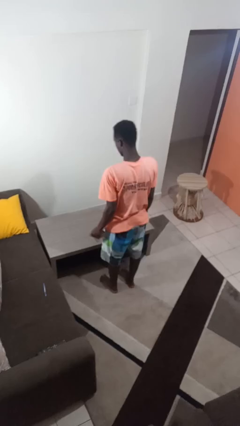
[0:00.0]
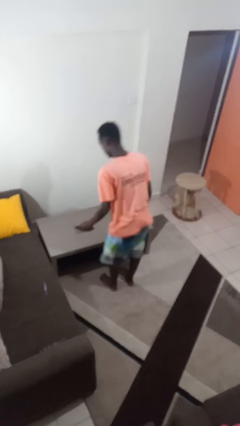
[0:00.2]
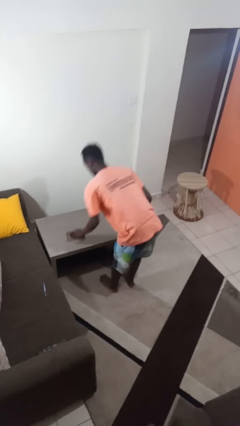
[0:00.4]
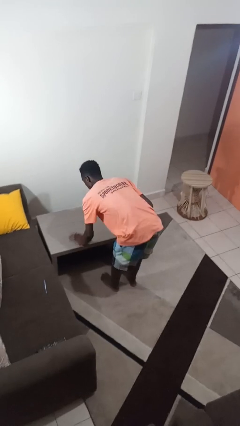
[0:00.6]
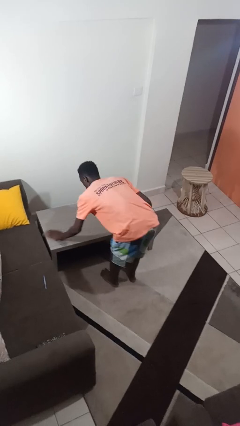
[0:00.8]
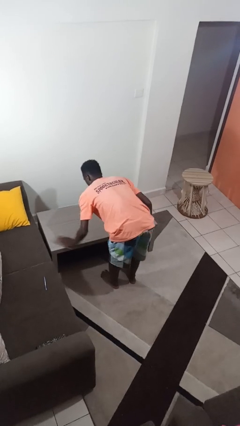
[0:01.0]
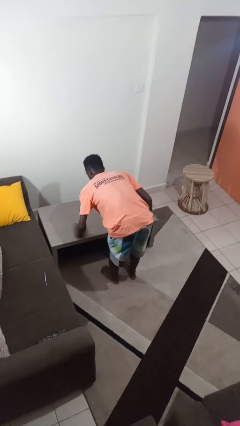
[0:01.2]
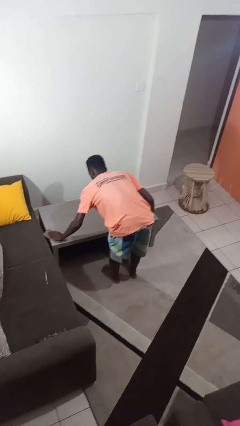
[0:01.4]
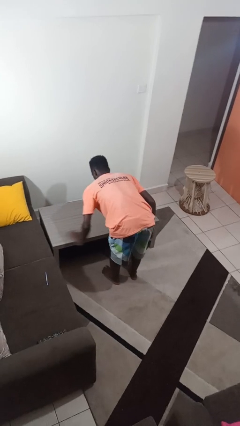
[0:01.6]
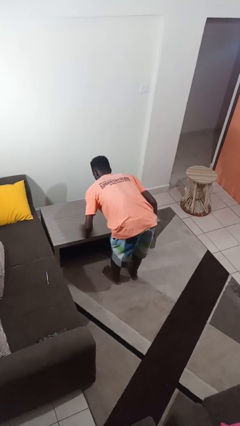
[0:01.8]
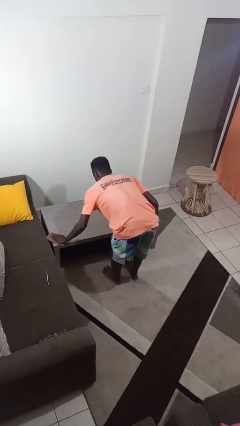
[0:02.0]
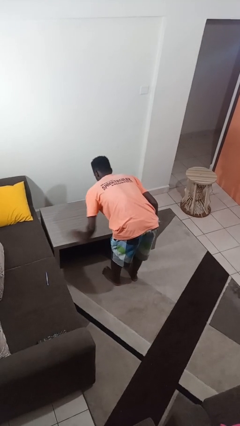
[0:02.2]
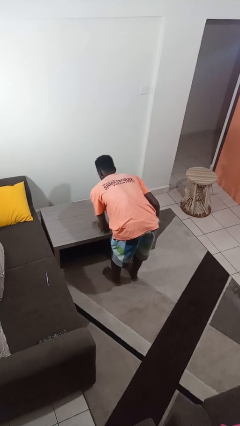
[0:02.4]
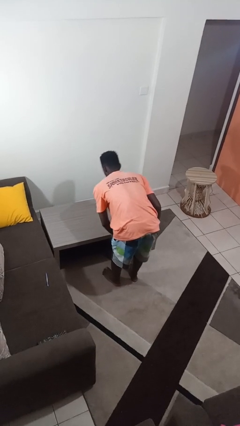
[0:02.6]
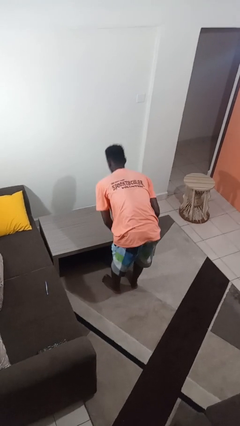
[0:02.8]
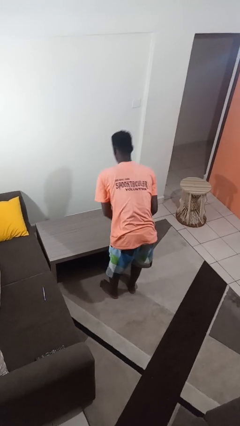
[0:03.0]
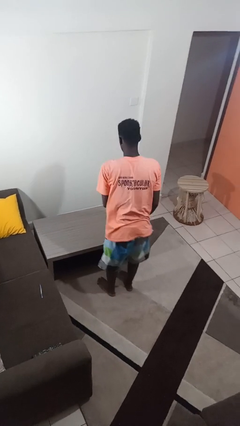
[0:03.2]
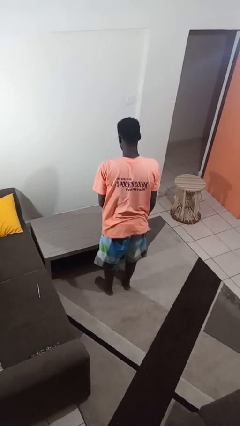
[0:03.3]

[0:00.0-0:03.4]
person cleans table with rag

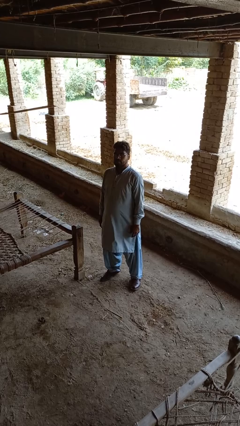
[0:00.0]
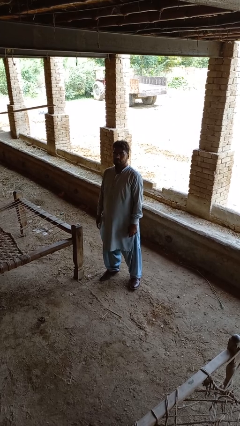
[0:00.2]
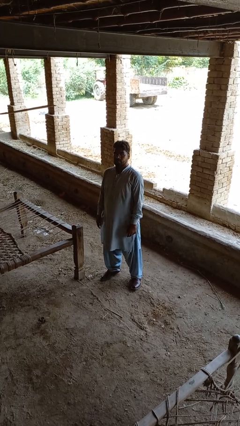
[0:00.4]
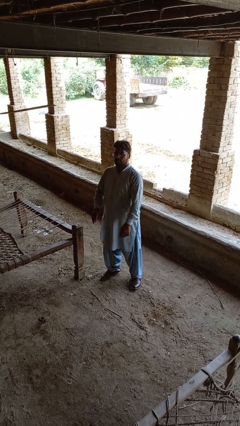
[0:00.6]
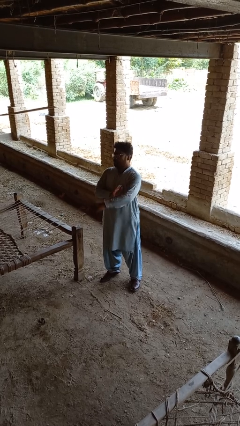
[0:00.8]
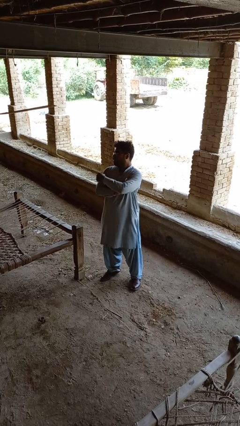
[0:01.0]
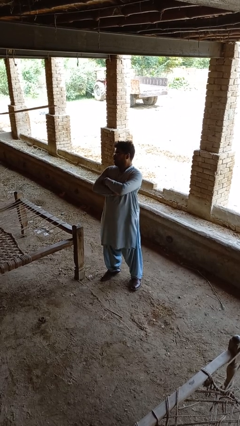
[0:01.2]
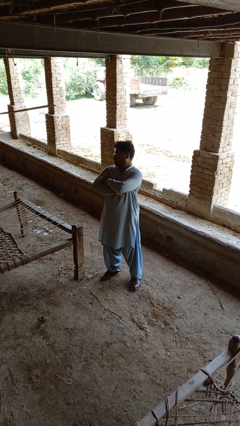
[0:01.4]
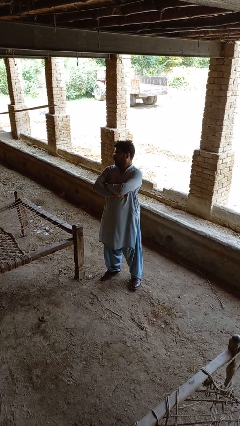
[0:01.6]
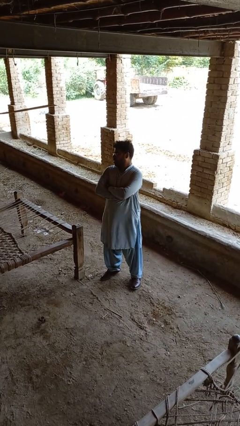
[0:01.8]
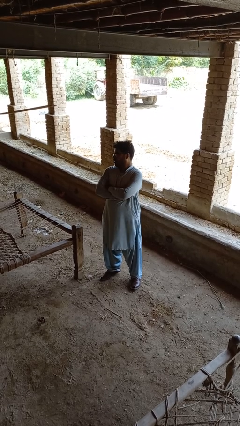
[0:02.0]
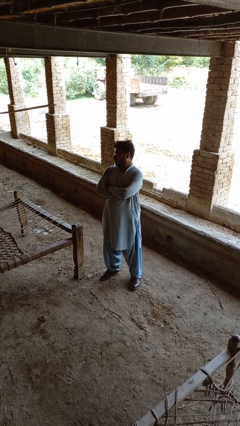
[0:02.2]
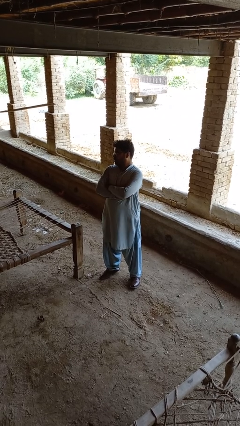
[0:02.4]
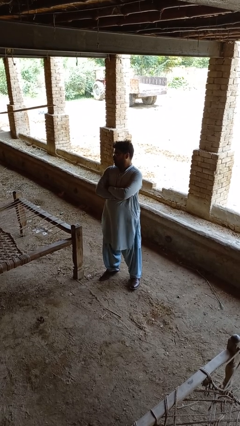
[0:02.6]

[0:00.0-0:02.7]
person crosses arms

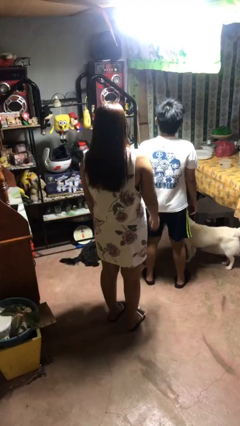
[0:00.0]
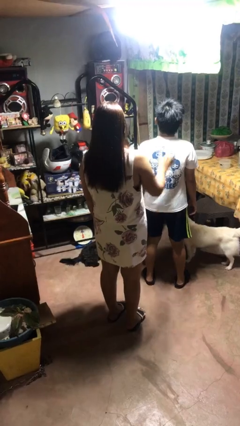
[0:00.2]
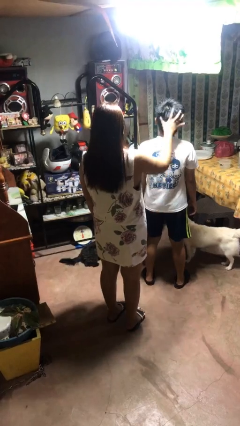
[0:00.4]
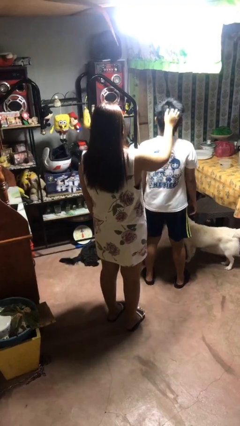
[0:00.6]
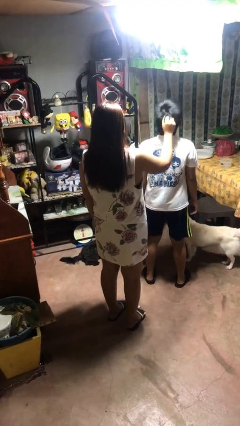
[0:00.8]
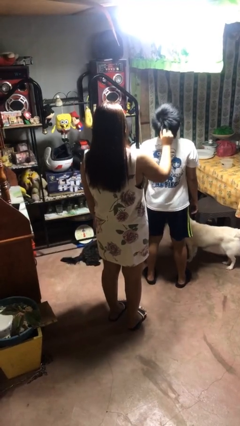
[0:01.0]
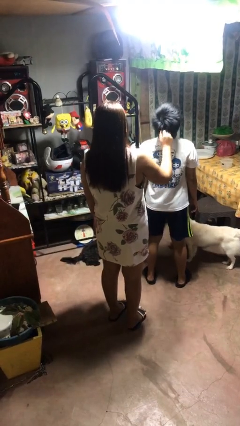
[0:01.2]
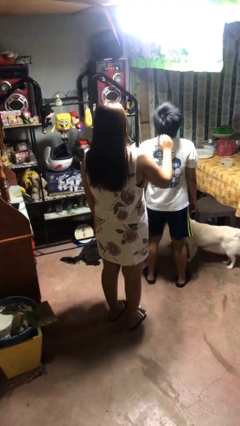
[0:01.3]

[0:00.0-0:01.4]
person grabs person by hair

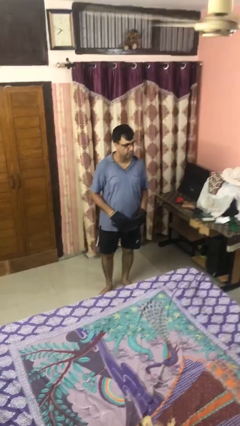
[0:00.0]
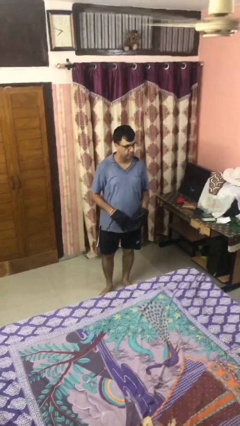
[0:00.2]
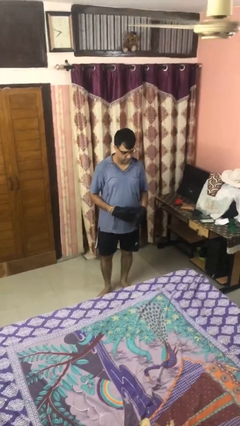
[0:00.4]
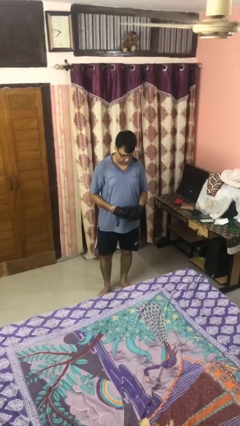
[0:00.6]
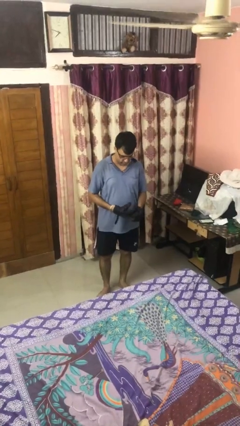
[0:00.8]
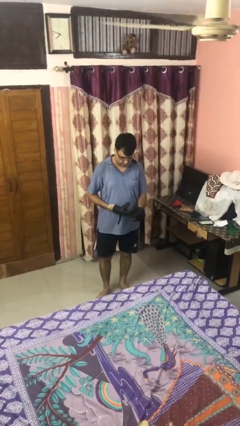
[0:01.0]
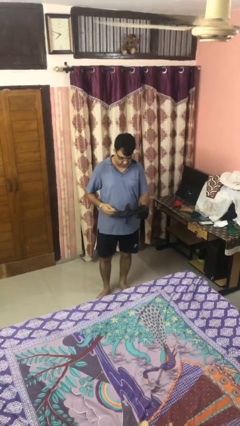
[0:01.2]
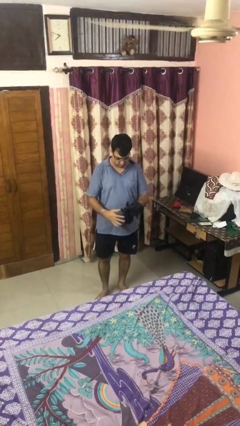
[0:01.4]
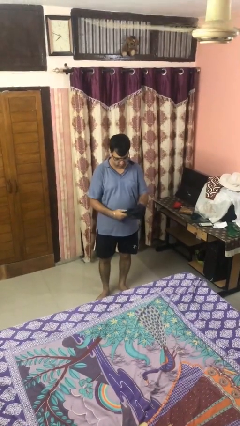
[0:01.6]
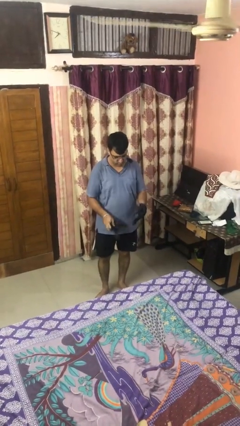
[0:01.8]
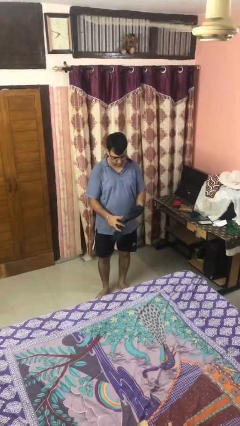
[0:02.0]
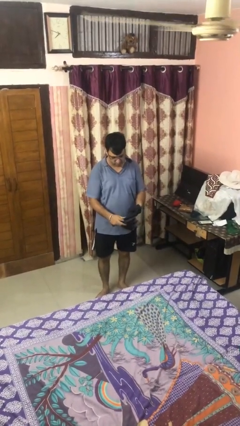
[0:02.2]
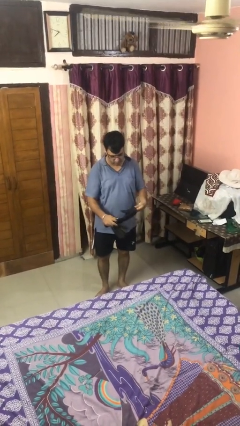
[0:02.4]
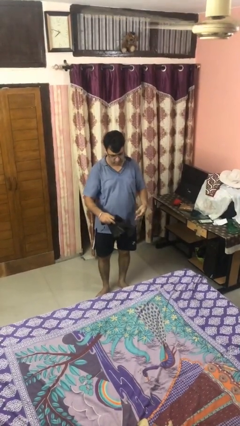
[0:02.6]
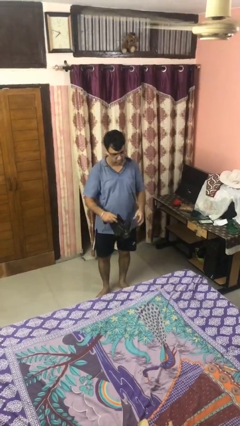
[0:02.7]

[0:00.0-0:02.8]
person takes off gloves

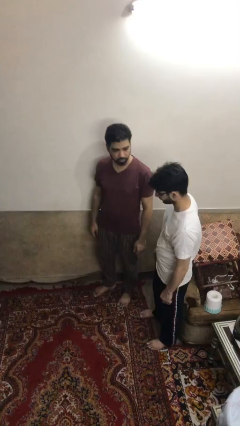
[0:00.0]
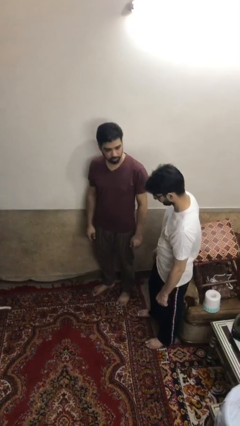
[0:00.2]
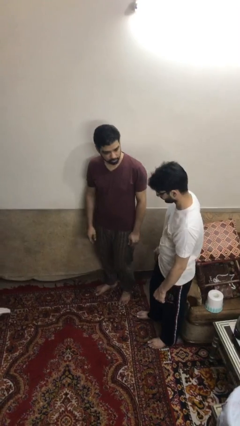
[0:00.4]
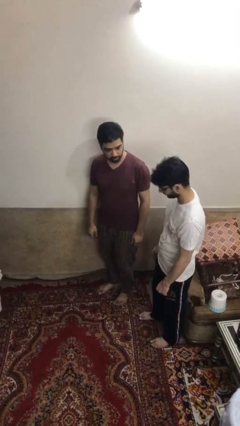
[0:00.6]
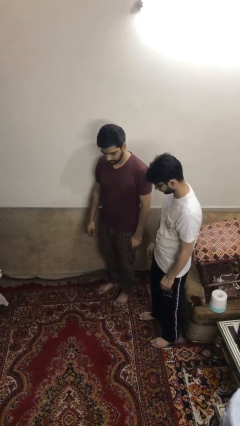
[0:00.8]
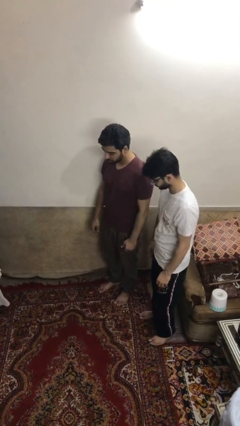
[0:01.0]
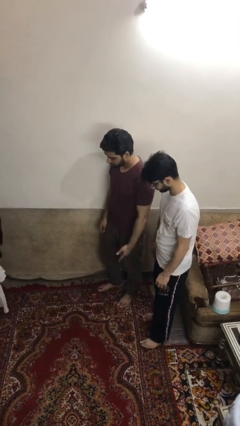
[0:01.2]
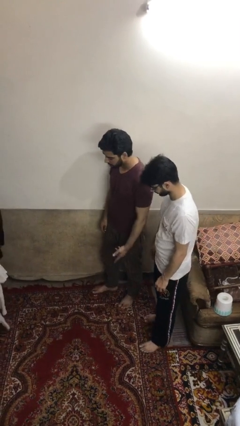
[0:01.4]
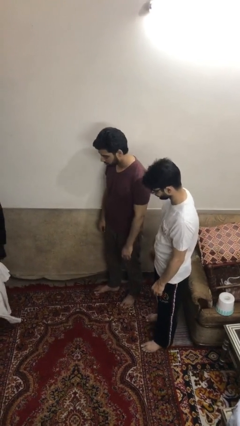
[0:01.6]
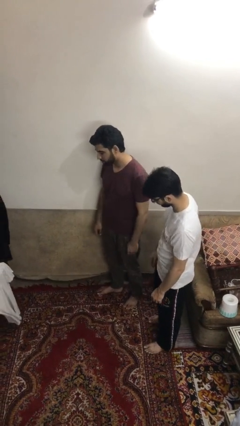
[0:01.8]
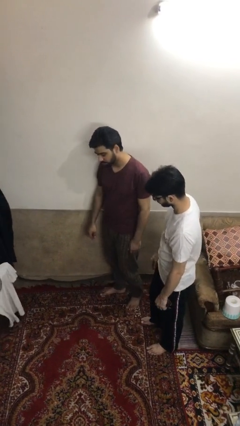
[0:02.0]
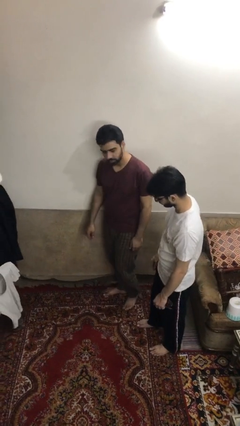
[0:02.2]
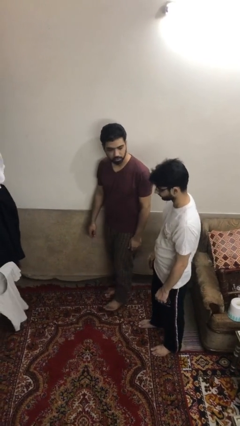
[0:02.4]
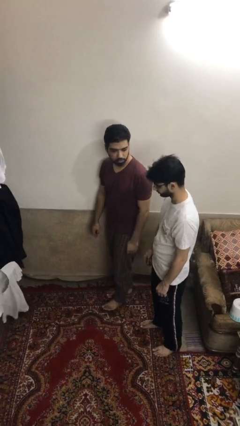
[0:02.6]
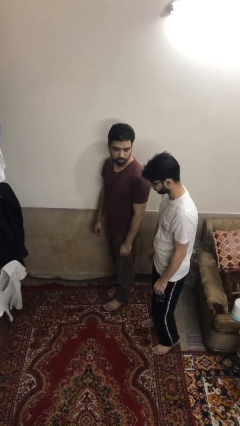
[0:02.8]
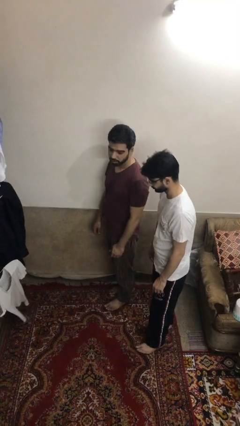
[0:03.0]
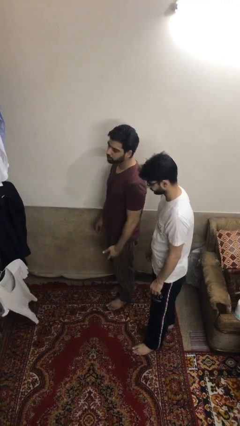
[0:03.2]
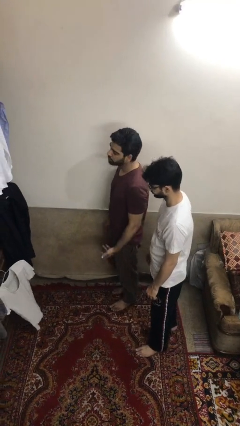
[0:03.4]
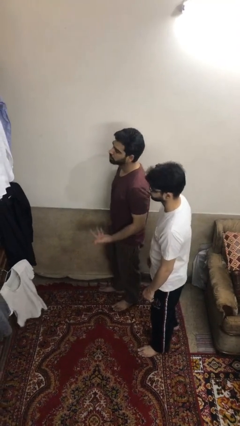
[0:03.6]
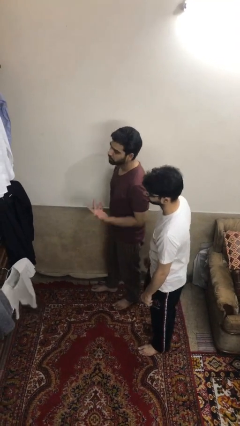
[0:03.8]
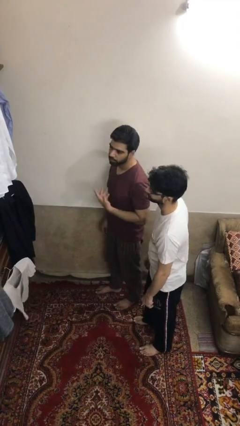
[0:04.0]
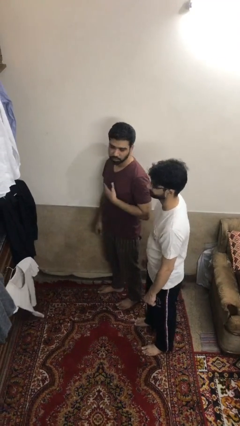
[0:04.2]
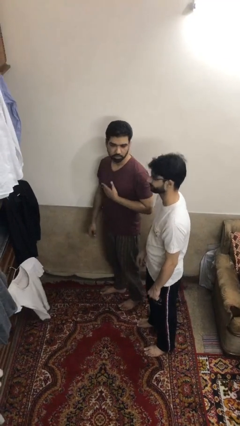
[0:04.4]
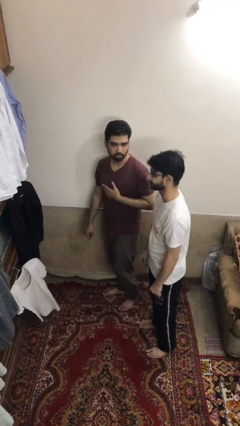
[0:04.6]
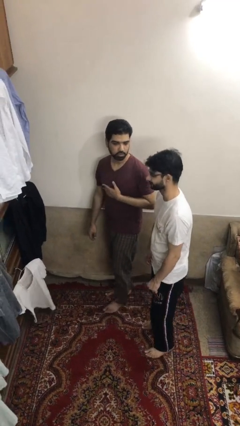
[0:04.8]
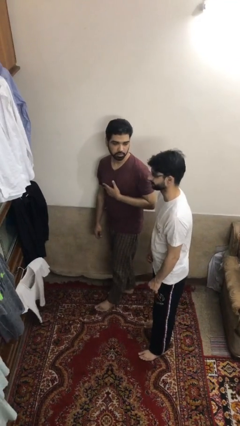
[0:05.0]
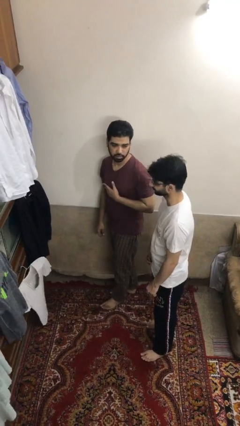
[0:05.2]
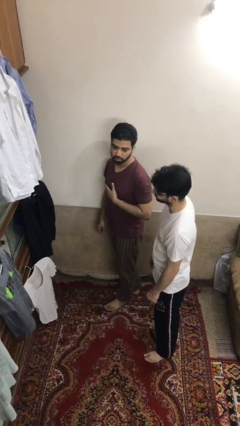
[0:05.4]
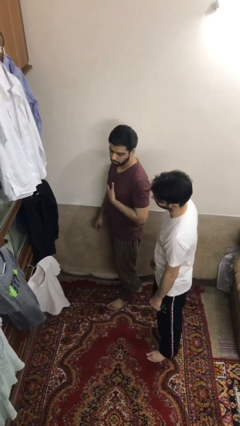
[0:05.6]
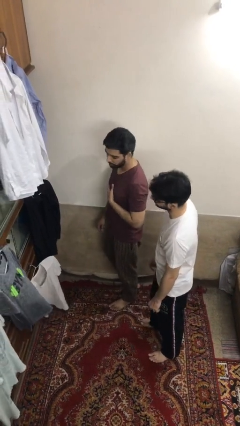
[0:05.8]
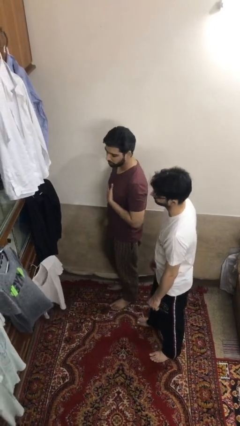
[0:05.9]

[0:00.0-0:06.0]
person talks to person

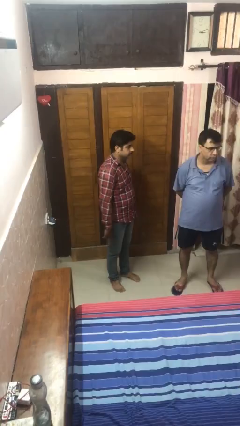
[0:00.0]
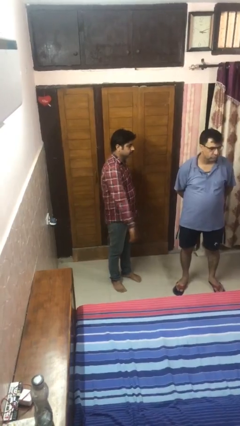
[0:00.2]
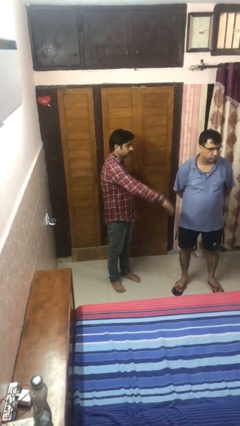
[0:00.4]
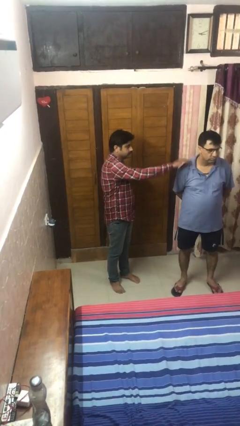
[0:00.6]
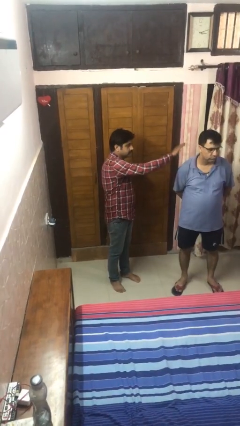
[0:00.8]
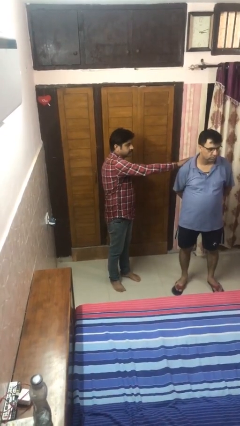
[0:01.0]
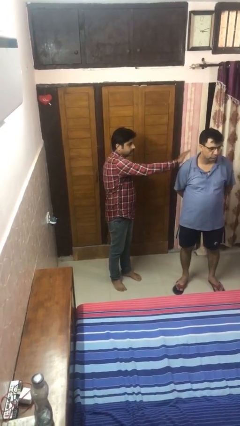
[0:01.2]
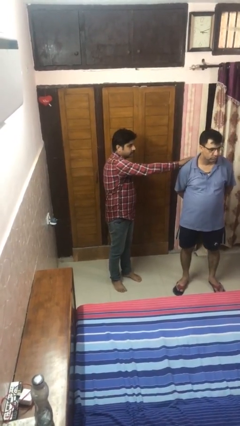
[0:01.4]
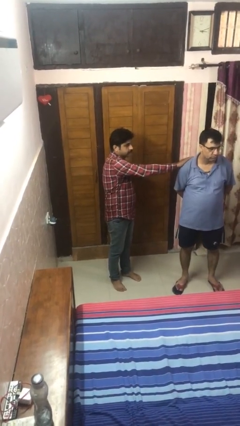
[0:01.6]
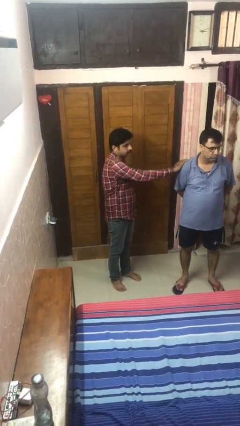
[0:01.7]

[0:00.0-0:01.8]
person pounds shoulders of person
